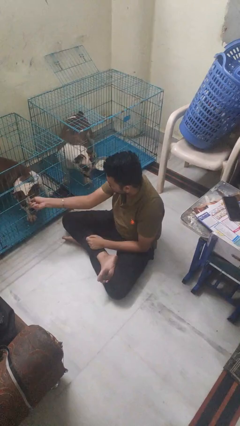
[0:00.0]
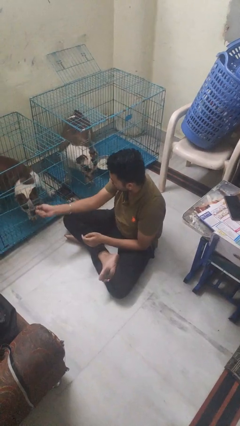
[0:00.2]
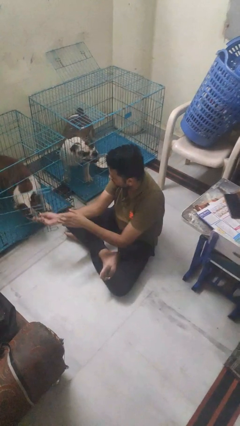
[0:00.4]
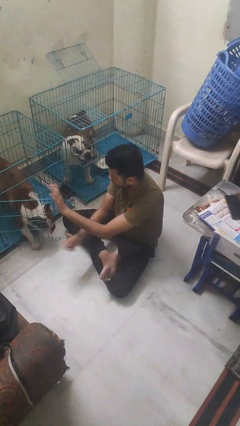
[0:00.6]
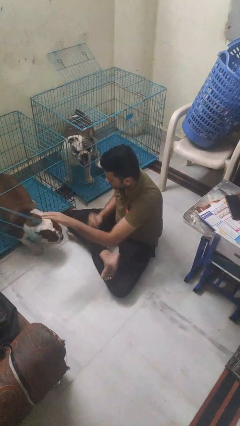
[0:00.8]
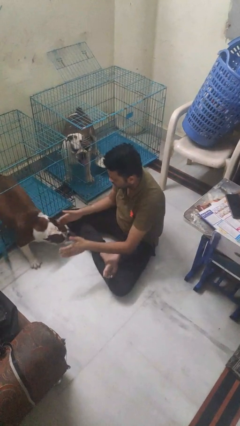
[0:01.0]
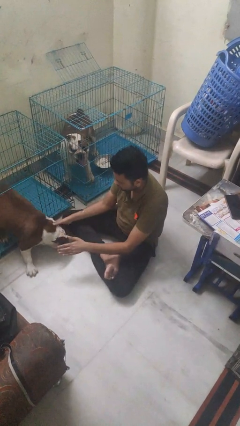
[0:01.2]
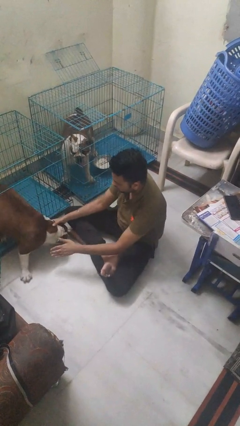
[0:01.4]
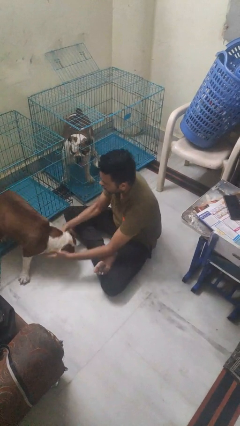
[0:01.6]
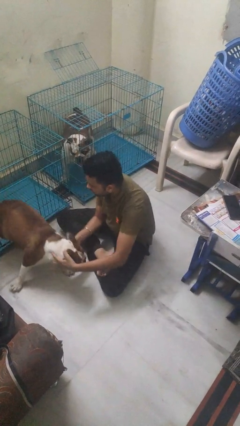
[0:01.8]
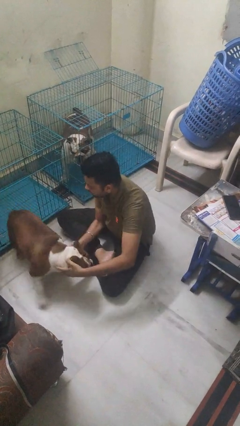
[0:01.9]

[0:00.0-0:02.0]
person uncrates dog

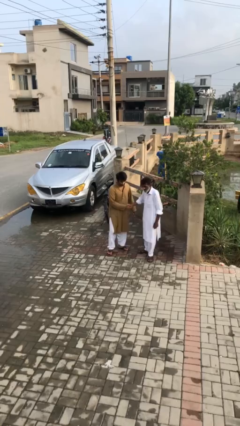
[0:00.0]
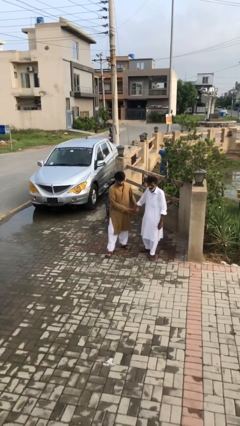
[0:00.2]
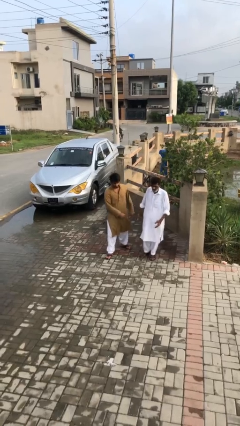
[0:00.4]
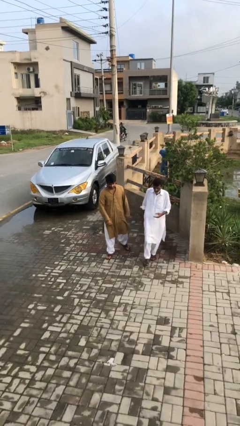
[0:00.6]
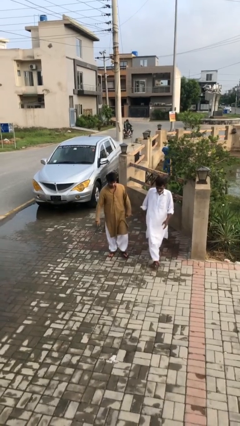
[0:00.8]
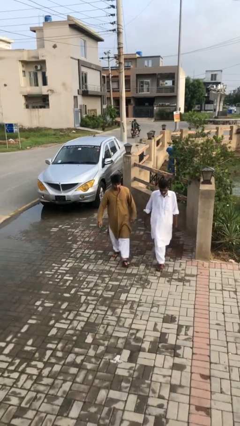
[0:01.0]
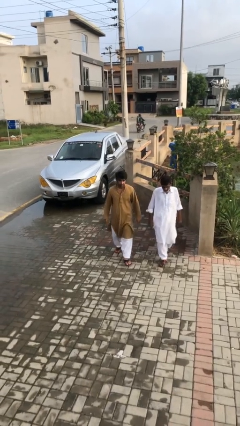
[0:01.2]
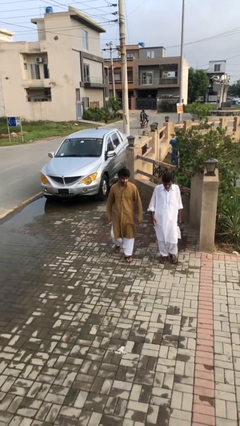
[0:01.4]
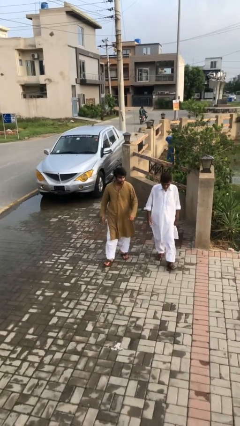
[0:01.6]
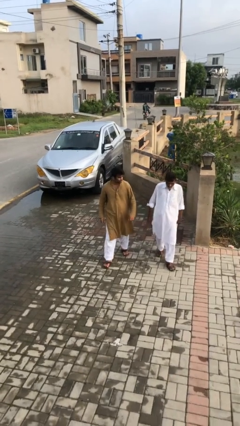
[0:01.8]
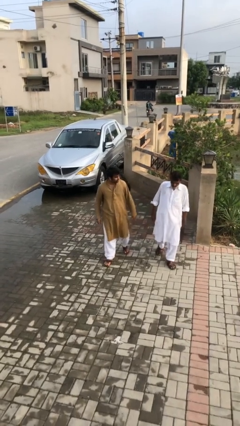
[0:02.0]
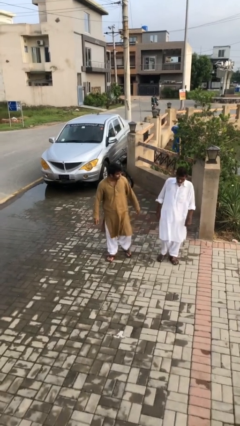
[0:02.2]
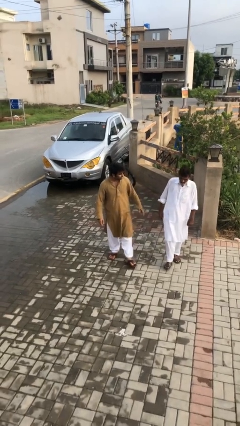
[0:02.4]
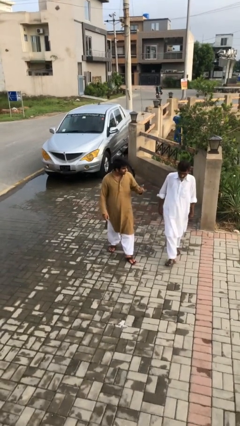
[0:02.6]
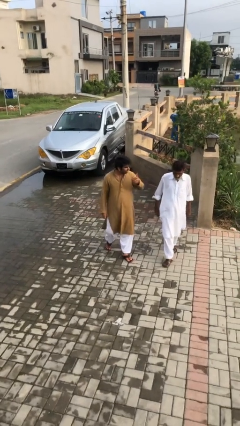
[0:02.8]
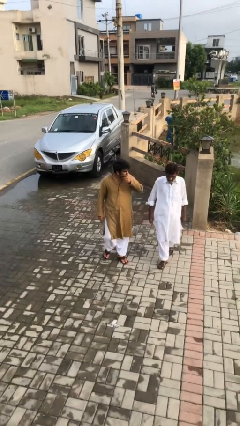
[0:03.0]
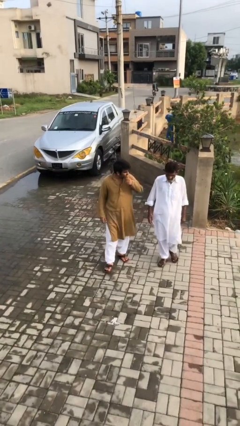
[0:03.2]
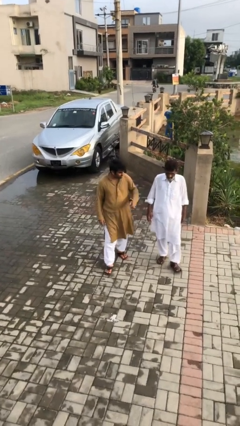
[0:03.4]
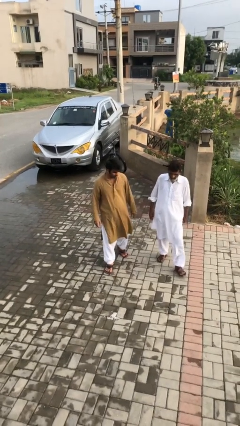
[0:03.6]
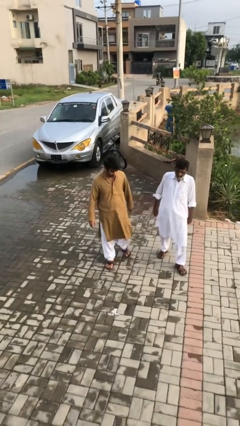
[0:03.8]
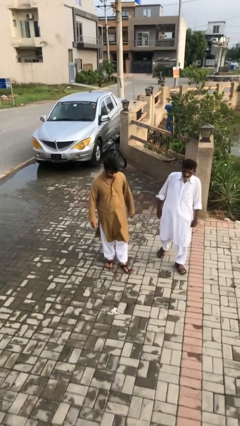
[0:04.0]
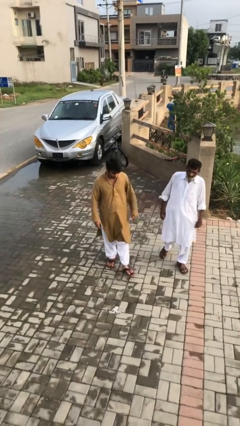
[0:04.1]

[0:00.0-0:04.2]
person talks to person

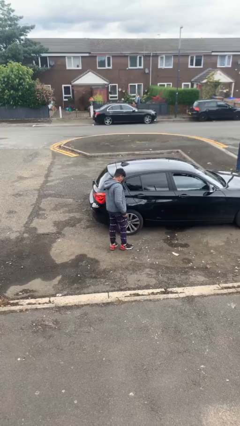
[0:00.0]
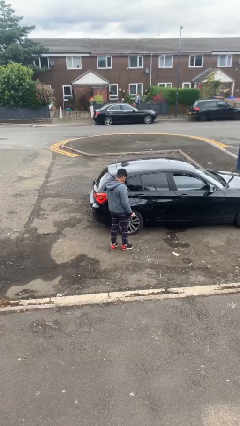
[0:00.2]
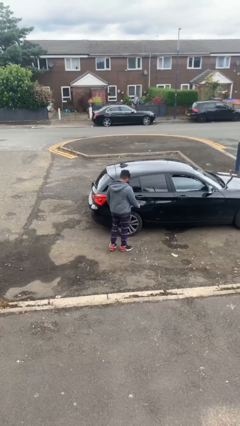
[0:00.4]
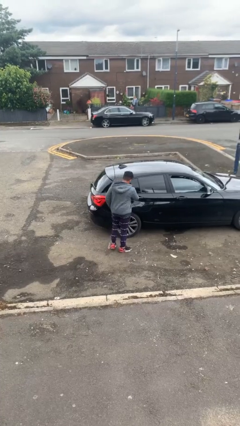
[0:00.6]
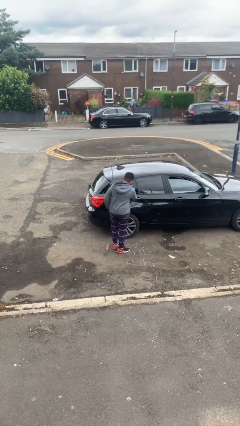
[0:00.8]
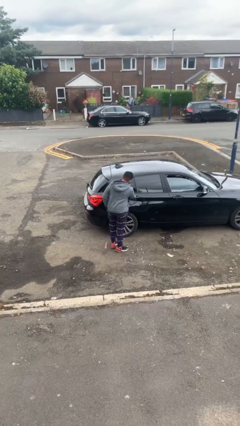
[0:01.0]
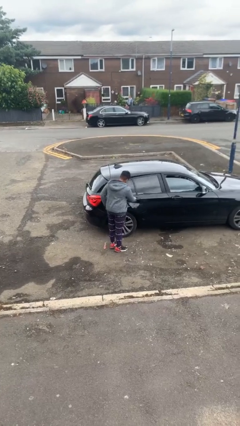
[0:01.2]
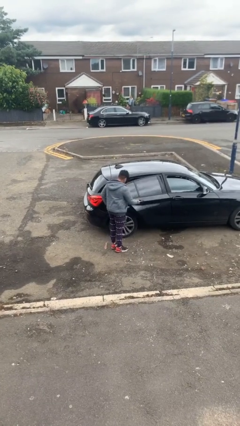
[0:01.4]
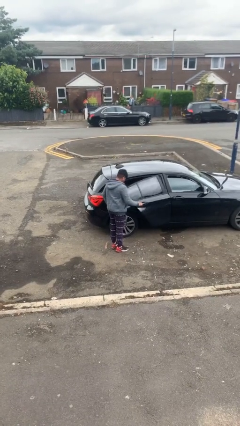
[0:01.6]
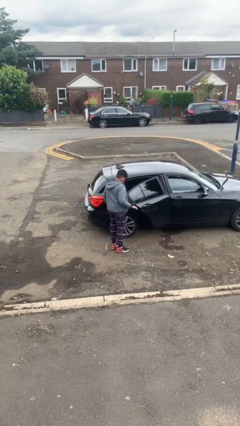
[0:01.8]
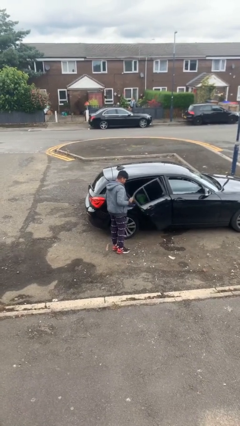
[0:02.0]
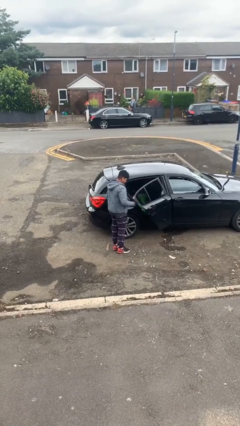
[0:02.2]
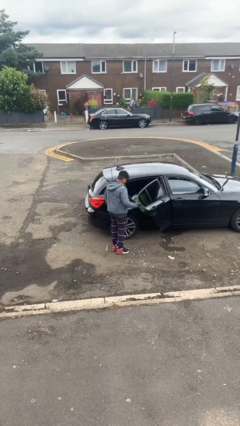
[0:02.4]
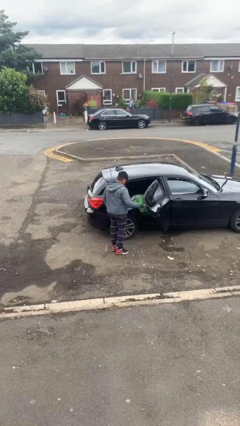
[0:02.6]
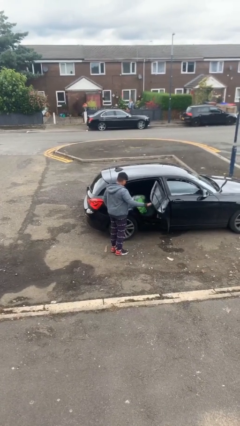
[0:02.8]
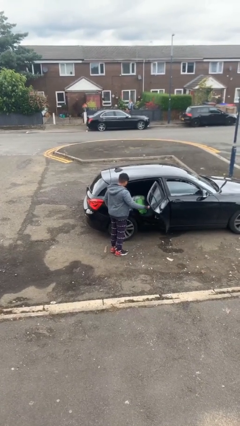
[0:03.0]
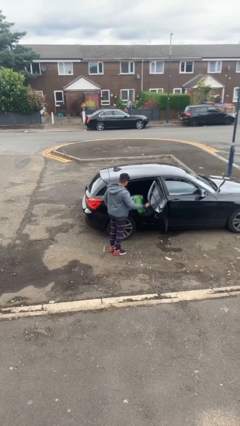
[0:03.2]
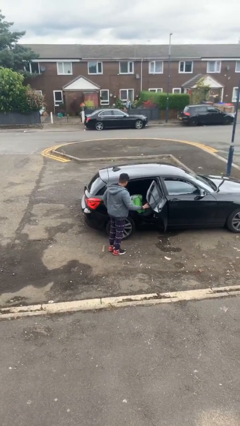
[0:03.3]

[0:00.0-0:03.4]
person opens car door

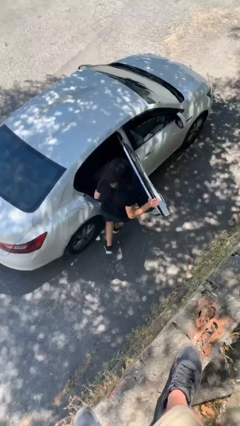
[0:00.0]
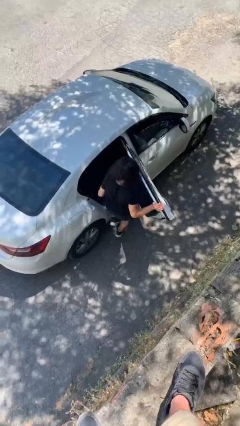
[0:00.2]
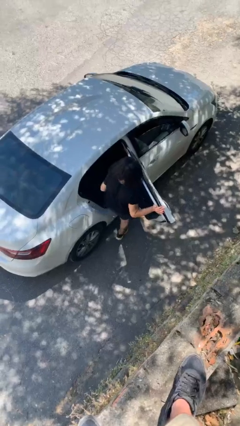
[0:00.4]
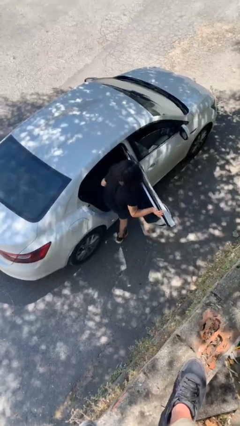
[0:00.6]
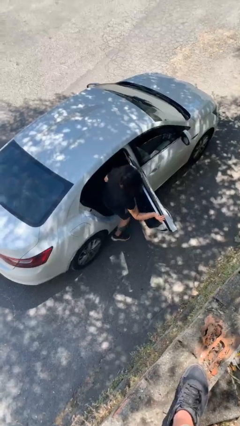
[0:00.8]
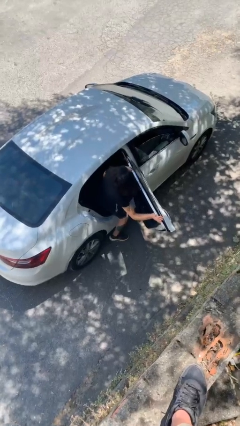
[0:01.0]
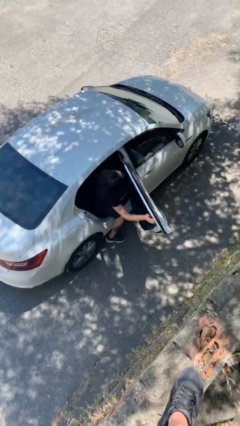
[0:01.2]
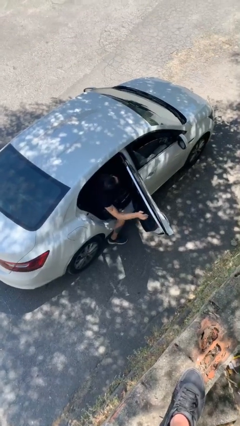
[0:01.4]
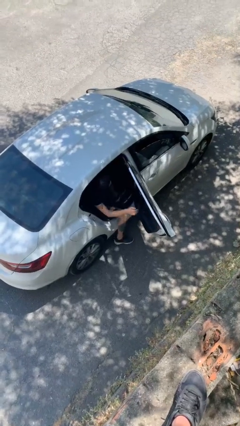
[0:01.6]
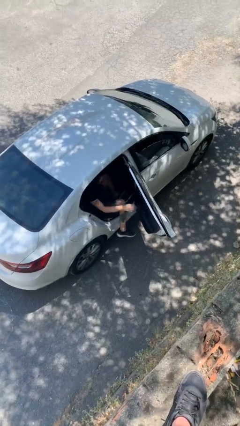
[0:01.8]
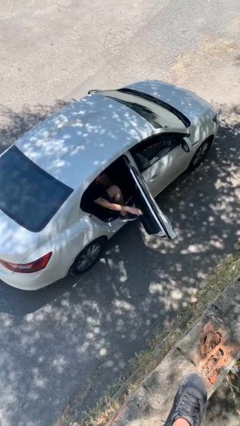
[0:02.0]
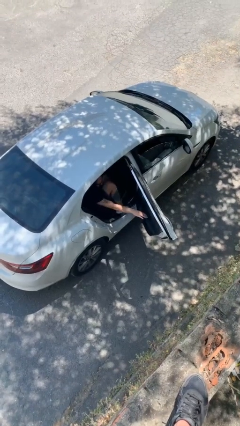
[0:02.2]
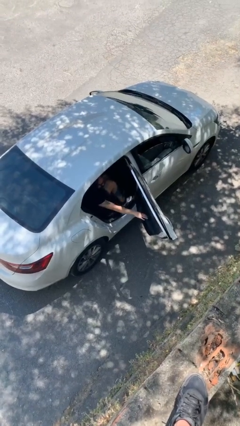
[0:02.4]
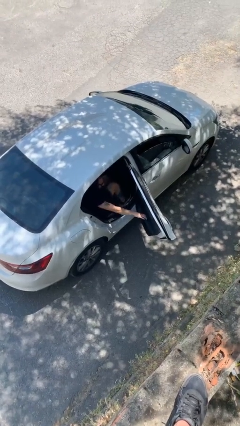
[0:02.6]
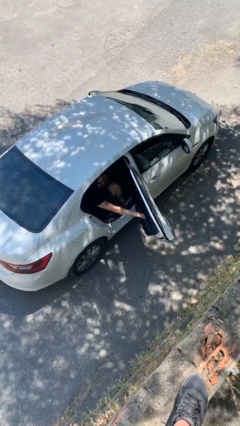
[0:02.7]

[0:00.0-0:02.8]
person enters car

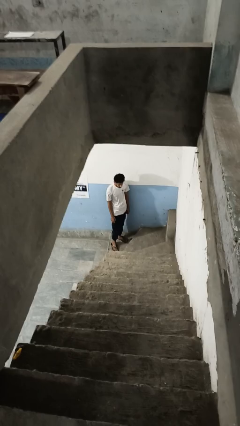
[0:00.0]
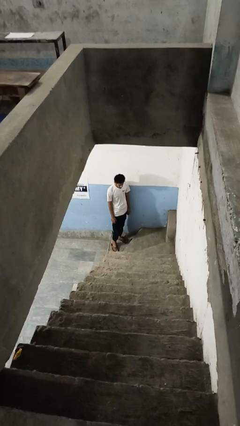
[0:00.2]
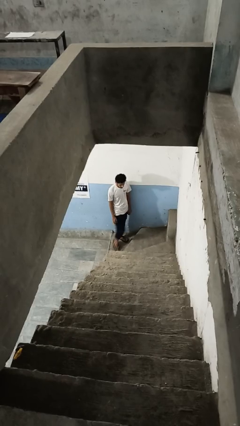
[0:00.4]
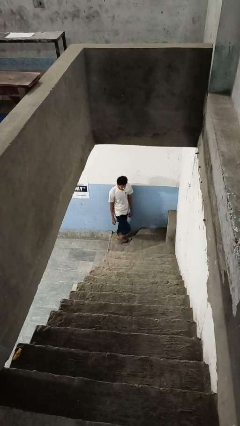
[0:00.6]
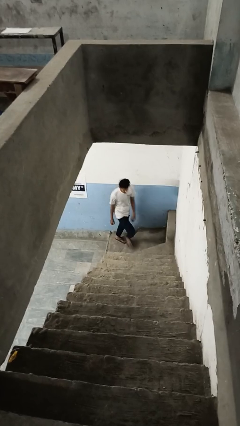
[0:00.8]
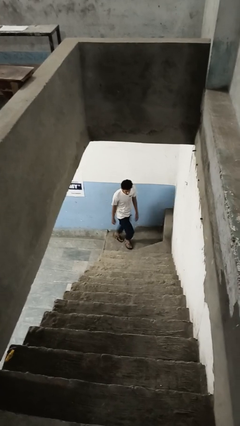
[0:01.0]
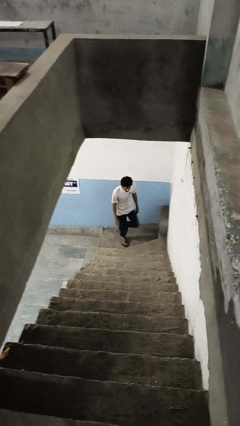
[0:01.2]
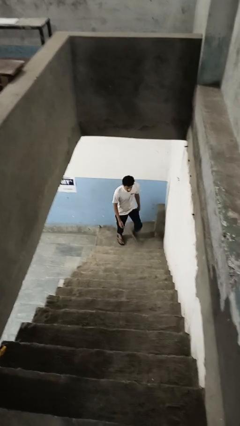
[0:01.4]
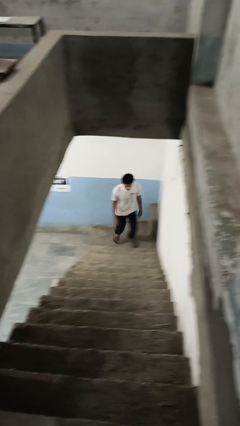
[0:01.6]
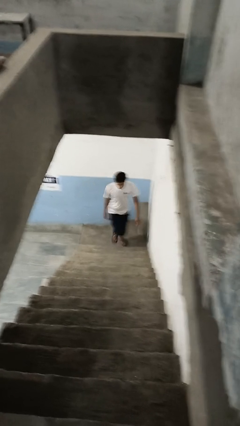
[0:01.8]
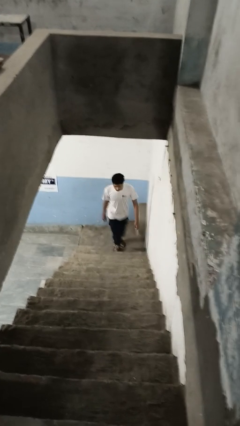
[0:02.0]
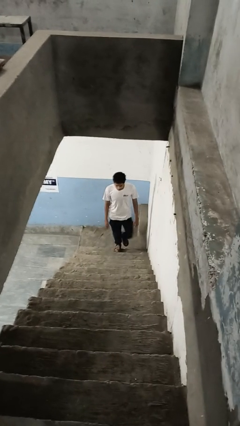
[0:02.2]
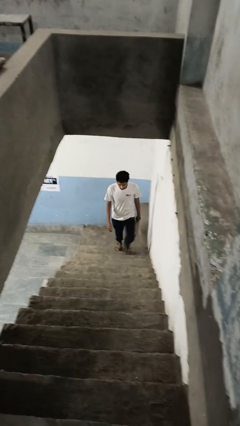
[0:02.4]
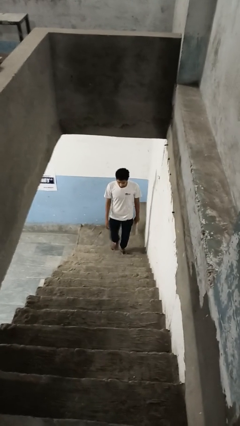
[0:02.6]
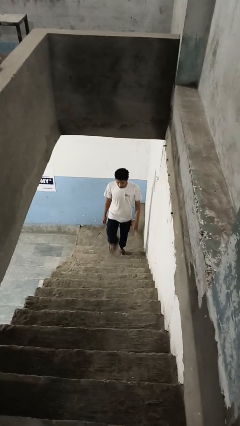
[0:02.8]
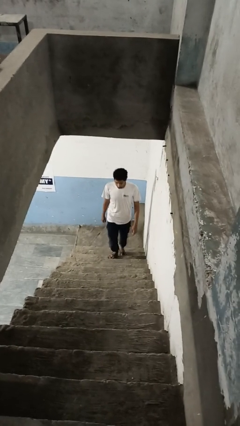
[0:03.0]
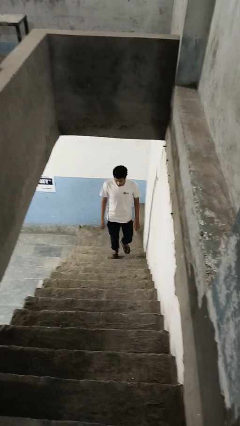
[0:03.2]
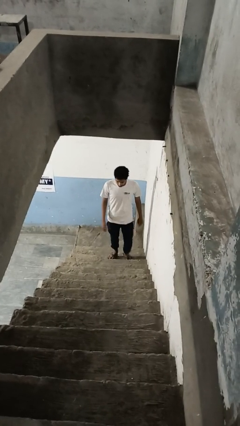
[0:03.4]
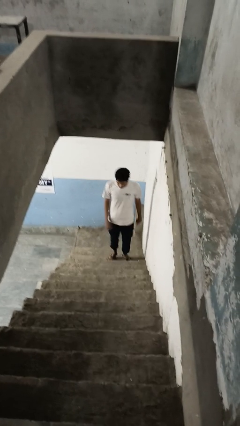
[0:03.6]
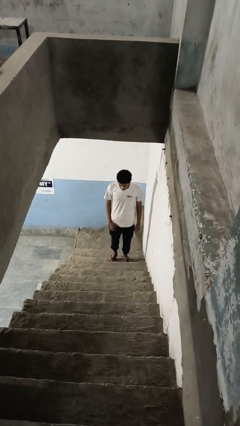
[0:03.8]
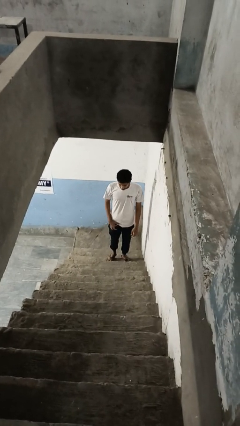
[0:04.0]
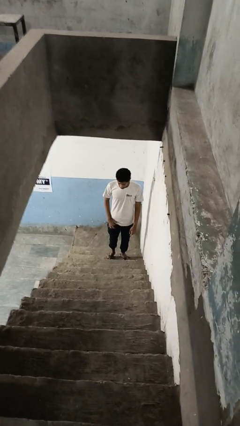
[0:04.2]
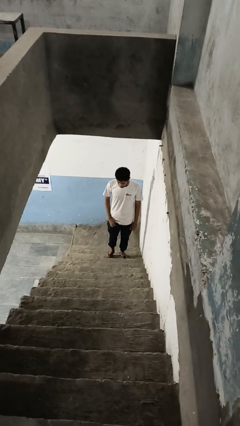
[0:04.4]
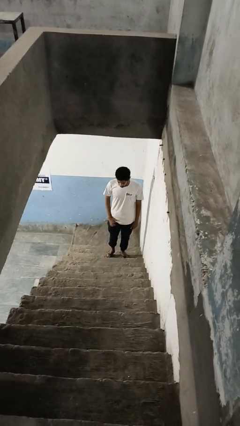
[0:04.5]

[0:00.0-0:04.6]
person climbs up stairs

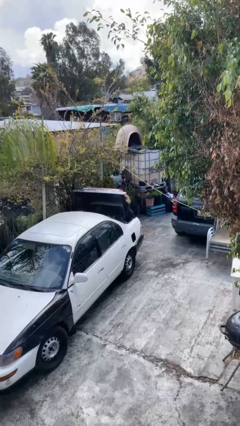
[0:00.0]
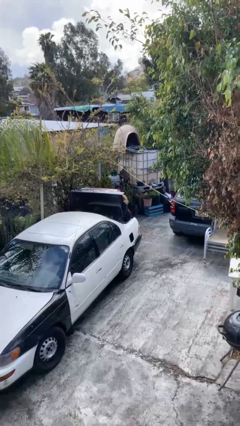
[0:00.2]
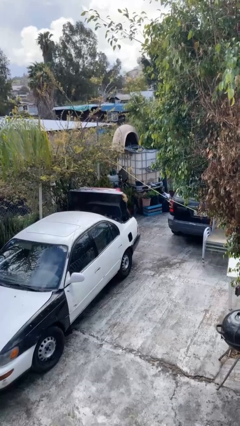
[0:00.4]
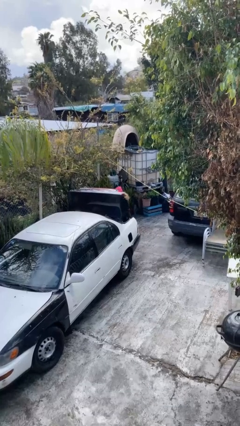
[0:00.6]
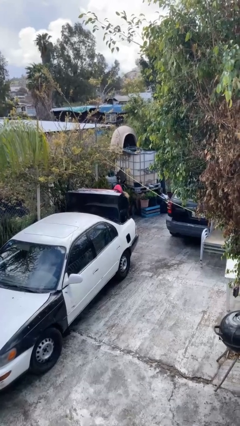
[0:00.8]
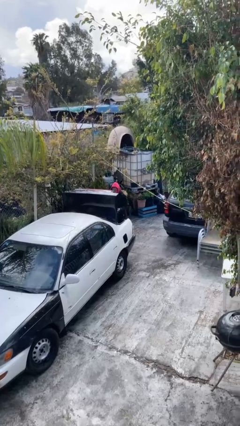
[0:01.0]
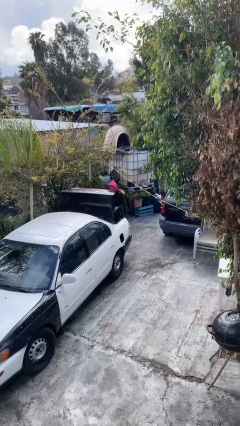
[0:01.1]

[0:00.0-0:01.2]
person unloads car
